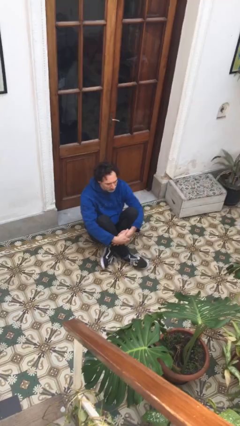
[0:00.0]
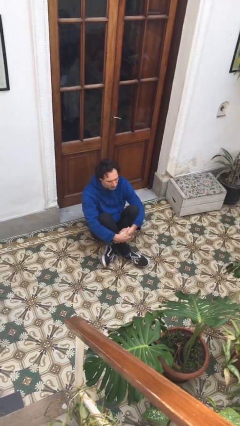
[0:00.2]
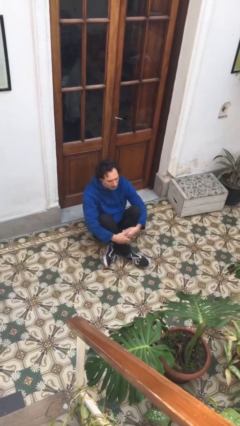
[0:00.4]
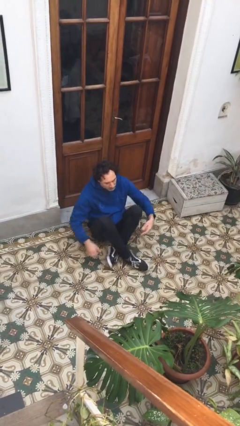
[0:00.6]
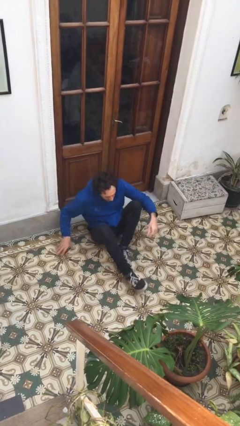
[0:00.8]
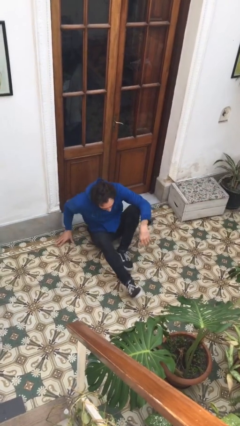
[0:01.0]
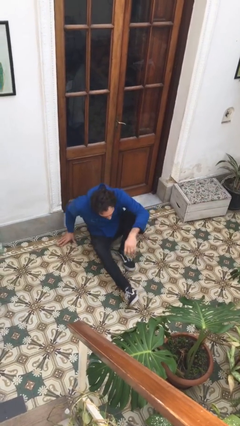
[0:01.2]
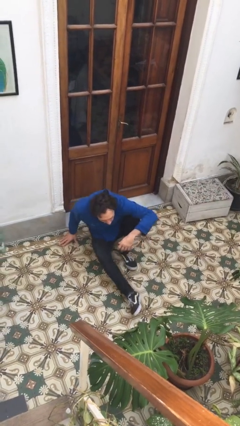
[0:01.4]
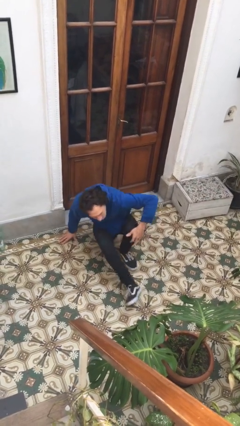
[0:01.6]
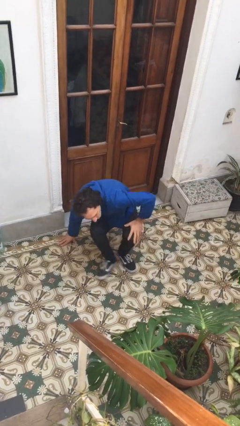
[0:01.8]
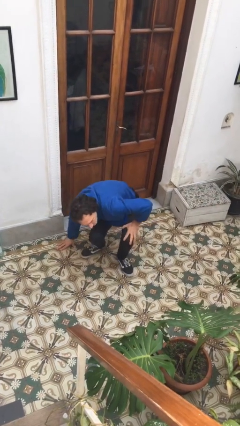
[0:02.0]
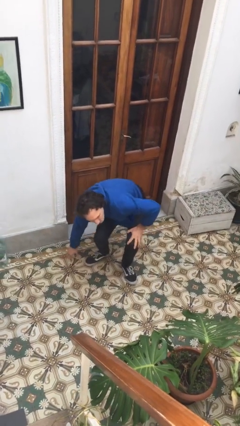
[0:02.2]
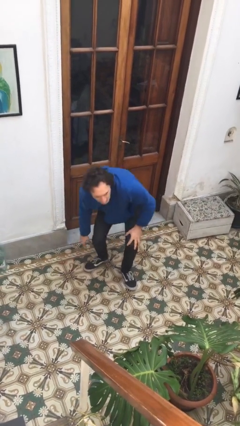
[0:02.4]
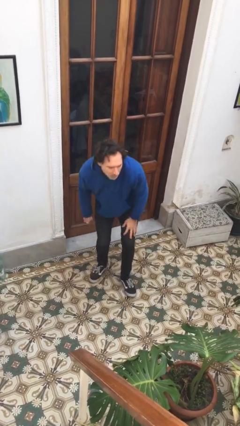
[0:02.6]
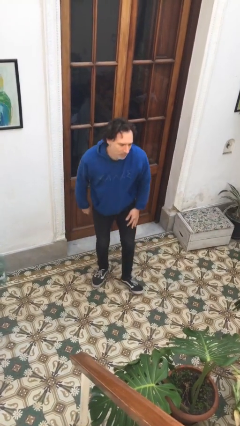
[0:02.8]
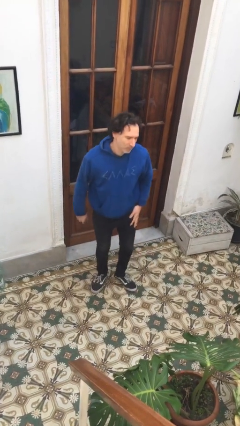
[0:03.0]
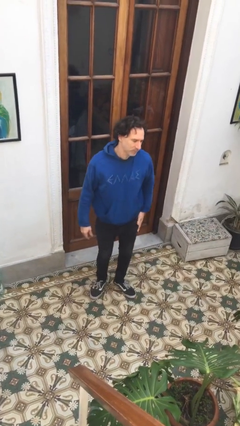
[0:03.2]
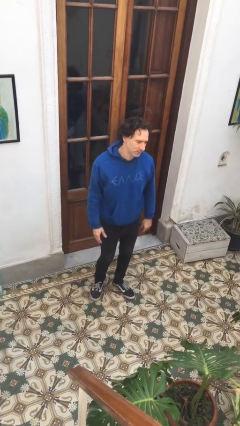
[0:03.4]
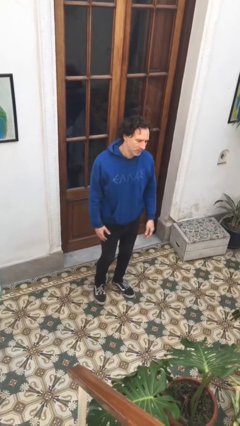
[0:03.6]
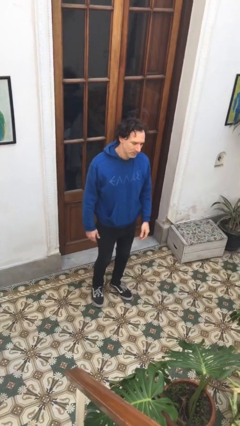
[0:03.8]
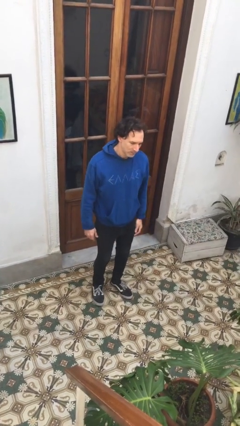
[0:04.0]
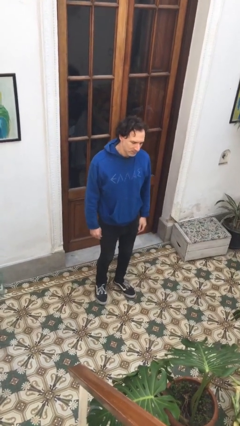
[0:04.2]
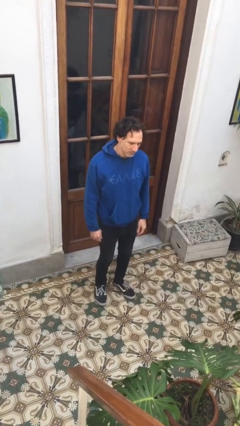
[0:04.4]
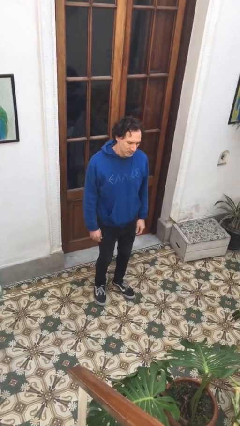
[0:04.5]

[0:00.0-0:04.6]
person stands up from floor

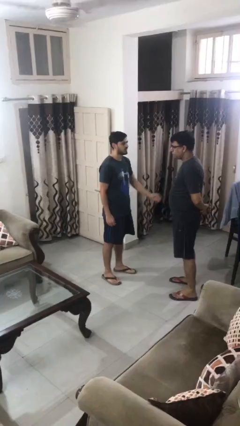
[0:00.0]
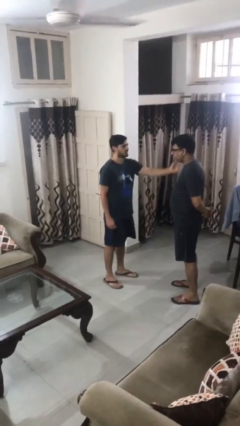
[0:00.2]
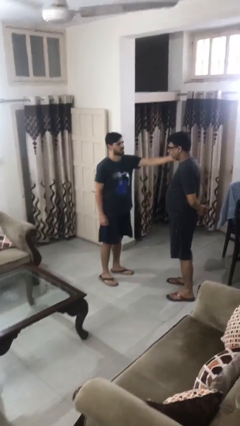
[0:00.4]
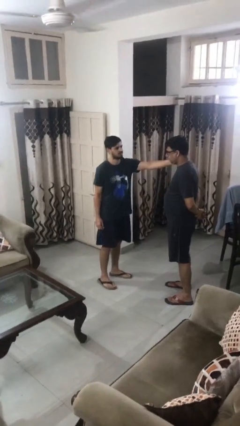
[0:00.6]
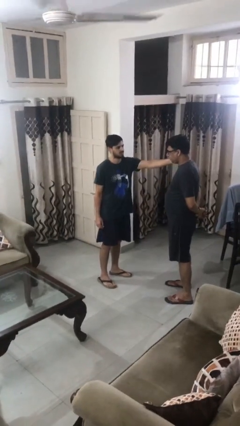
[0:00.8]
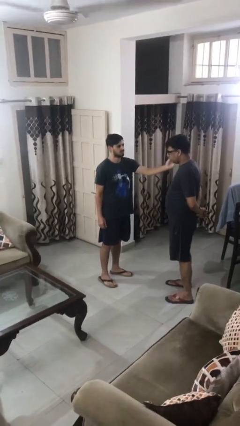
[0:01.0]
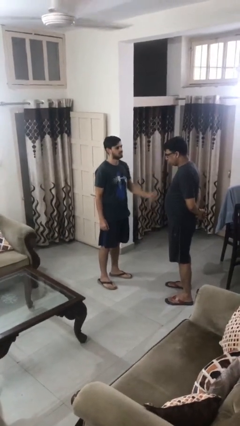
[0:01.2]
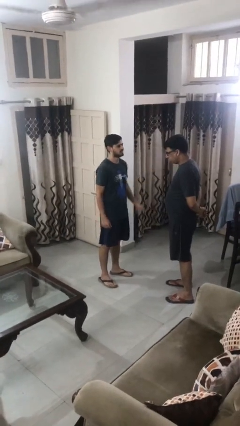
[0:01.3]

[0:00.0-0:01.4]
person touches face of person

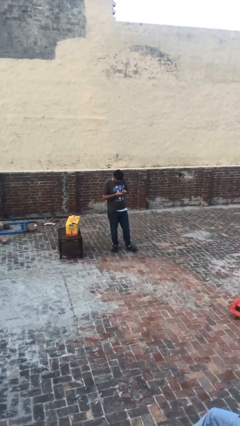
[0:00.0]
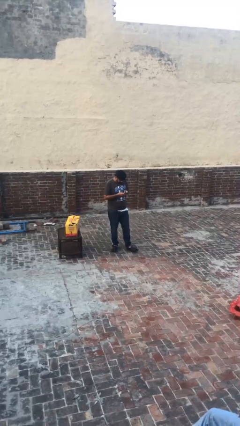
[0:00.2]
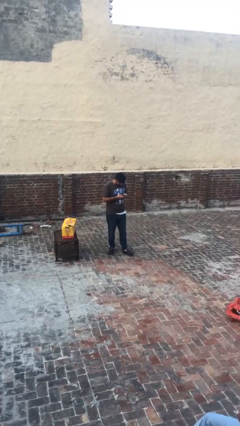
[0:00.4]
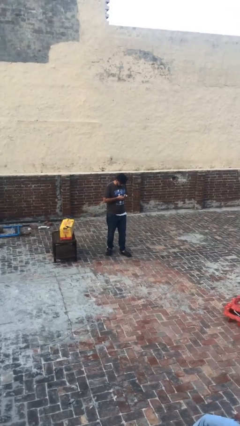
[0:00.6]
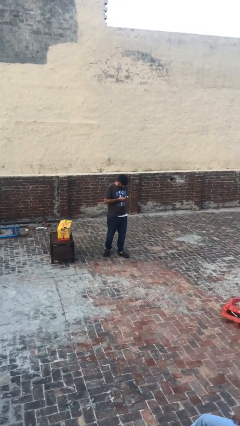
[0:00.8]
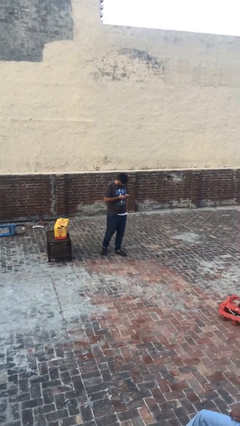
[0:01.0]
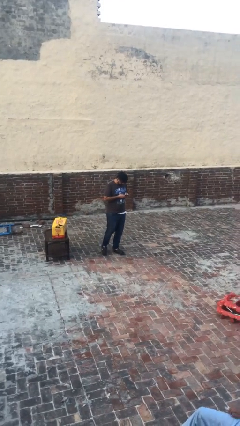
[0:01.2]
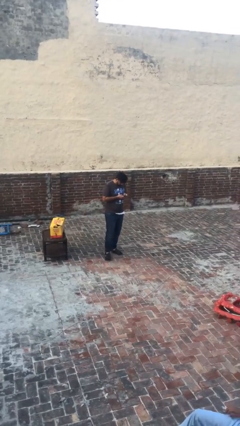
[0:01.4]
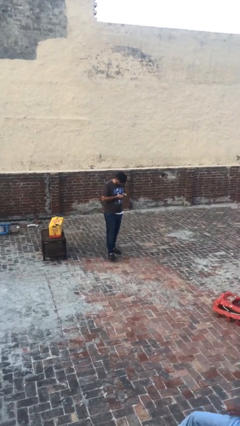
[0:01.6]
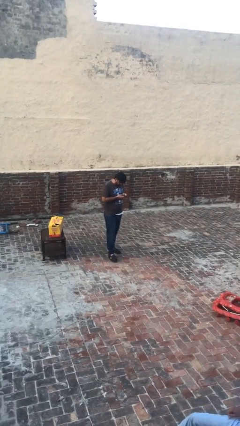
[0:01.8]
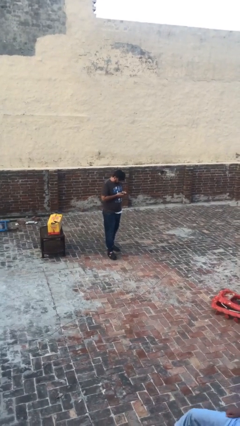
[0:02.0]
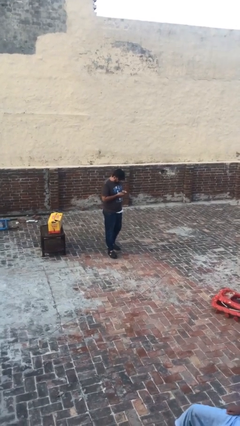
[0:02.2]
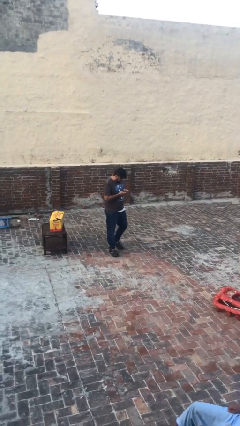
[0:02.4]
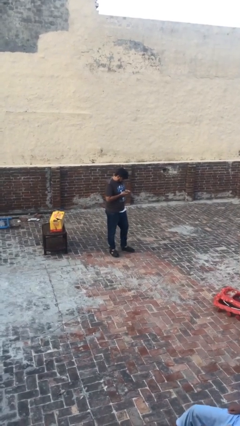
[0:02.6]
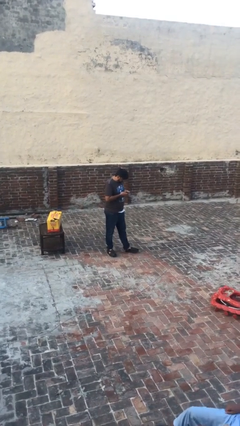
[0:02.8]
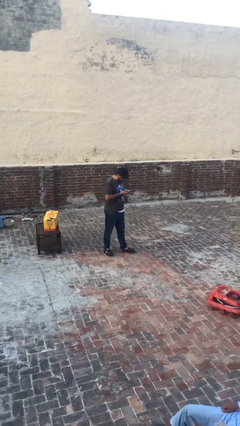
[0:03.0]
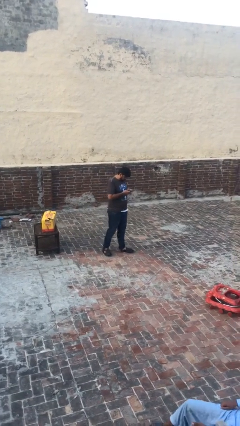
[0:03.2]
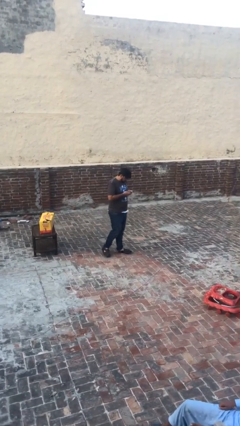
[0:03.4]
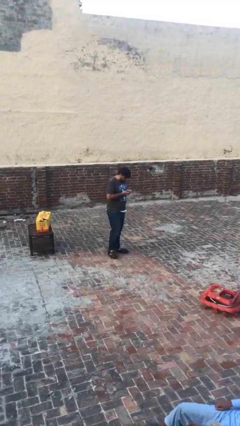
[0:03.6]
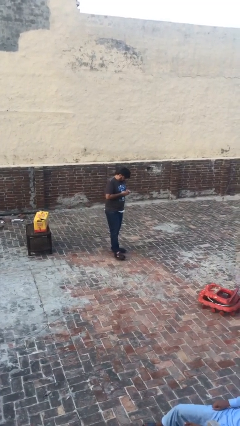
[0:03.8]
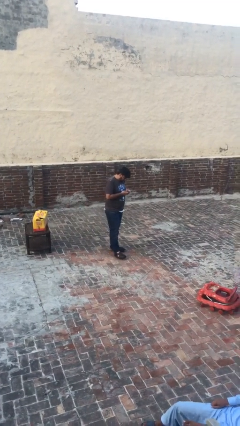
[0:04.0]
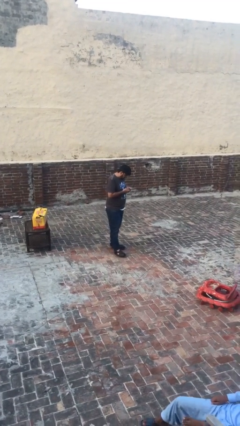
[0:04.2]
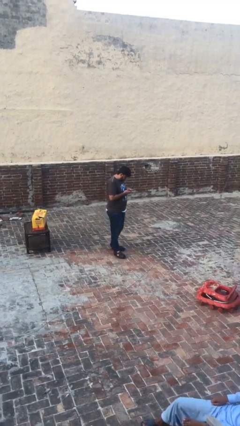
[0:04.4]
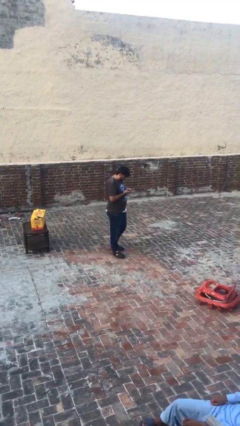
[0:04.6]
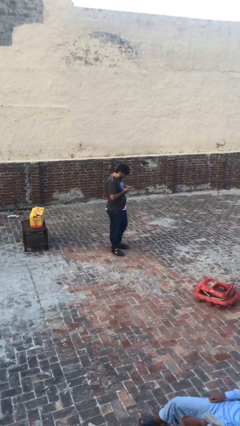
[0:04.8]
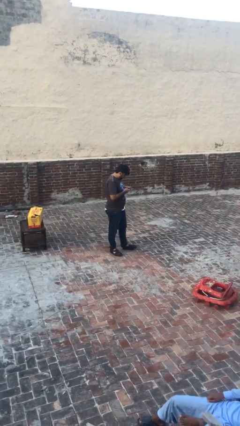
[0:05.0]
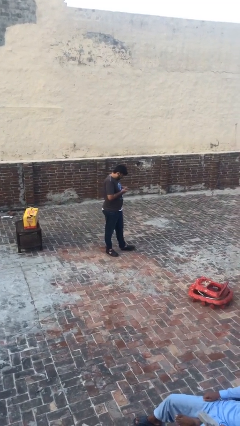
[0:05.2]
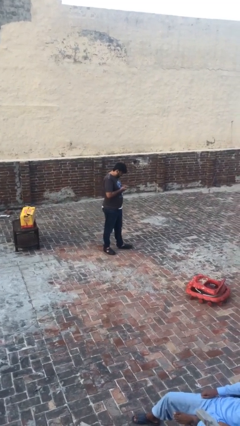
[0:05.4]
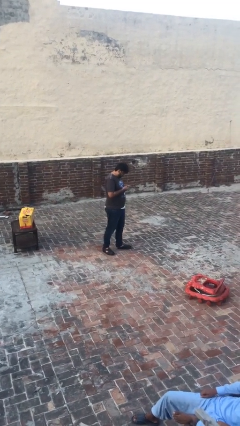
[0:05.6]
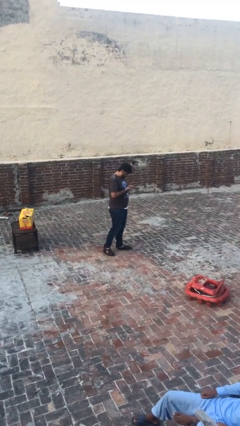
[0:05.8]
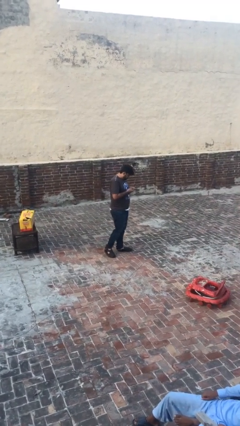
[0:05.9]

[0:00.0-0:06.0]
person texts on phone

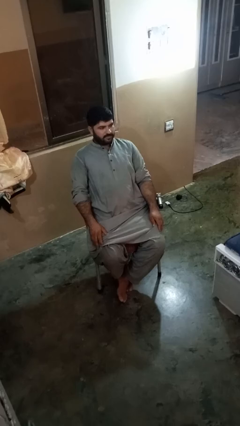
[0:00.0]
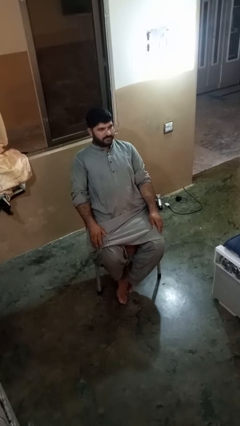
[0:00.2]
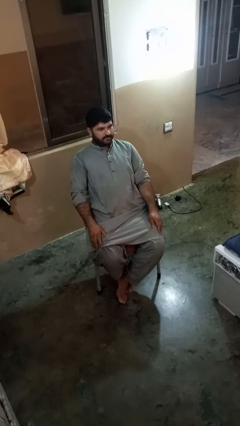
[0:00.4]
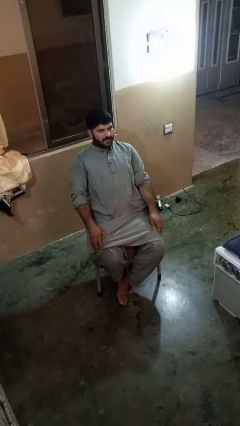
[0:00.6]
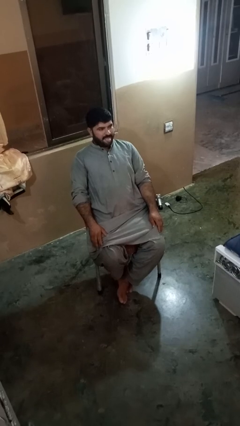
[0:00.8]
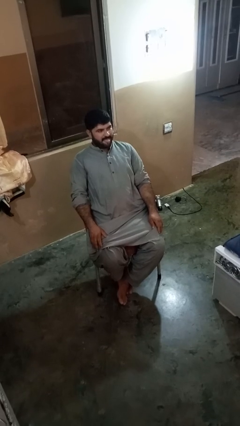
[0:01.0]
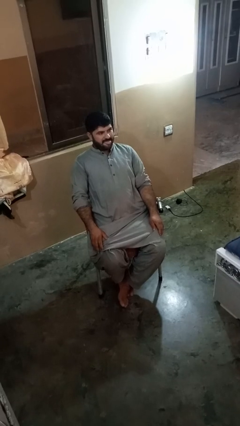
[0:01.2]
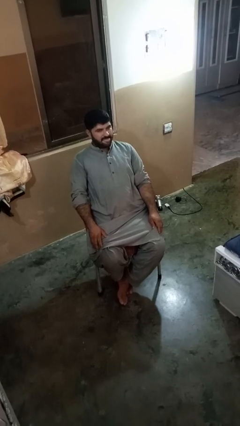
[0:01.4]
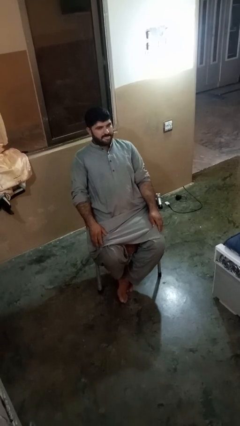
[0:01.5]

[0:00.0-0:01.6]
person sticks out tongue

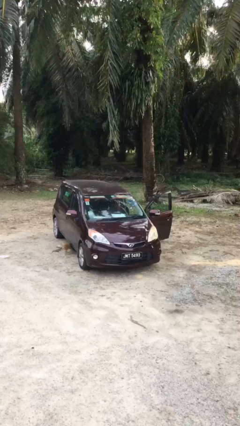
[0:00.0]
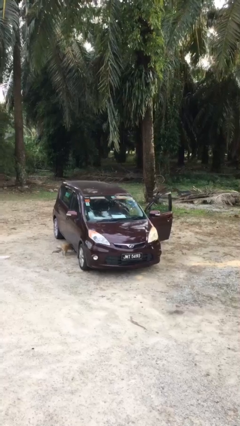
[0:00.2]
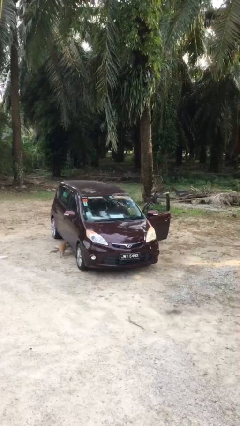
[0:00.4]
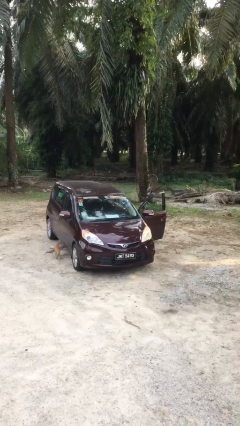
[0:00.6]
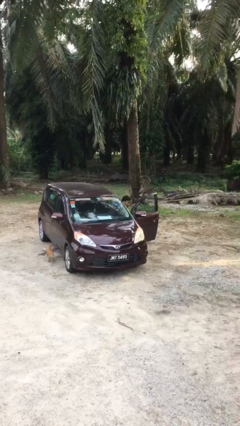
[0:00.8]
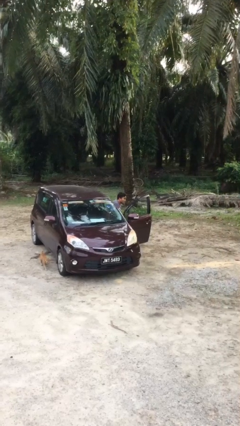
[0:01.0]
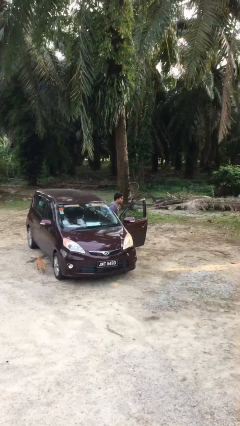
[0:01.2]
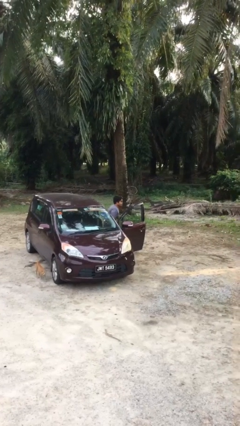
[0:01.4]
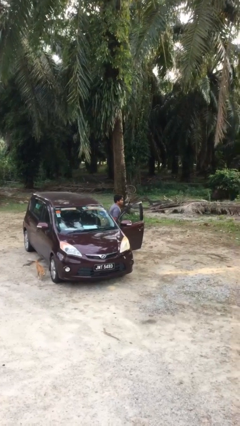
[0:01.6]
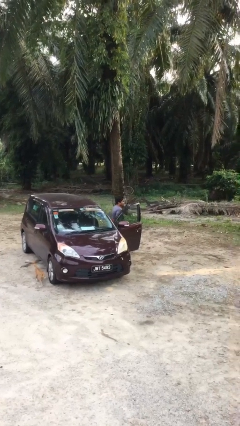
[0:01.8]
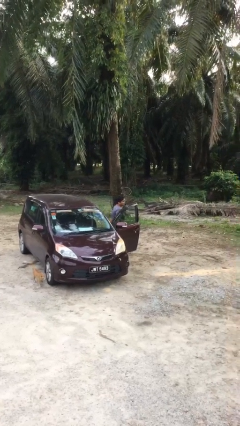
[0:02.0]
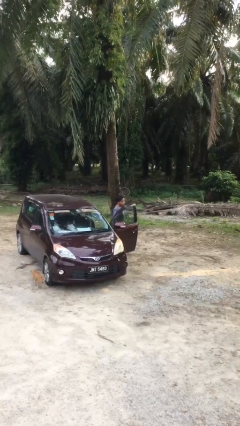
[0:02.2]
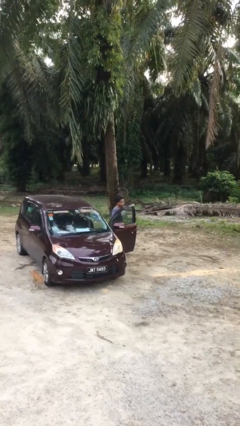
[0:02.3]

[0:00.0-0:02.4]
person exits car

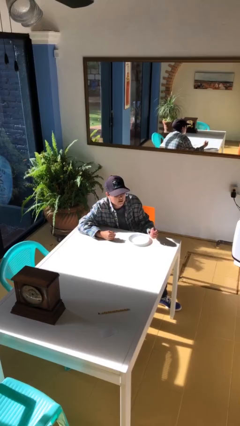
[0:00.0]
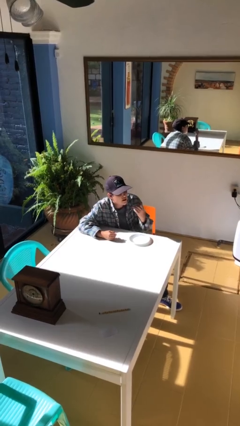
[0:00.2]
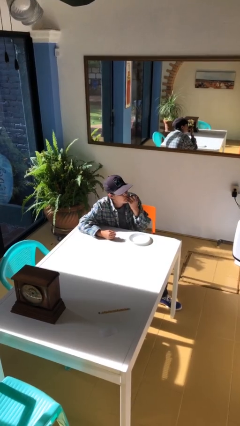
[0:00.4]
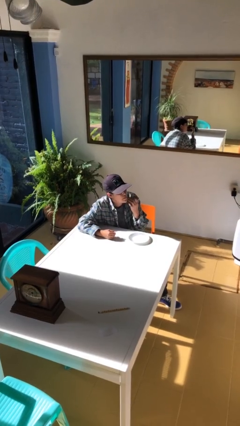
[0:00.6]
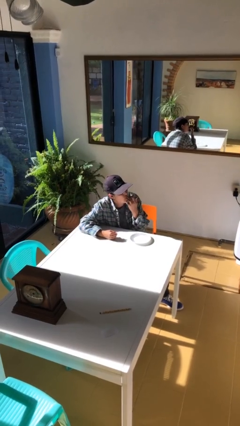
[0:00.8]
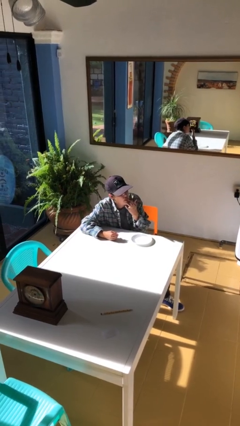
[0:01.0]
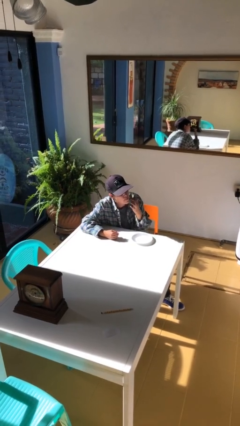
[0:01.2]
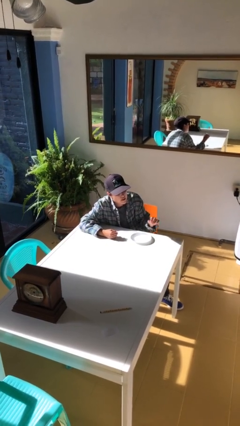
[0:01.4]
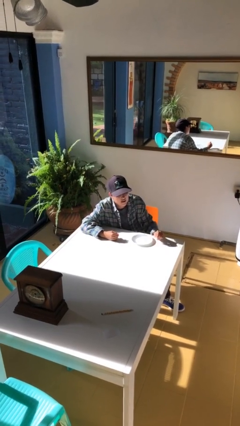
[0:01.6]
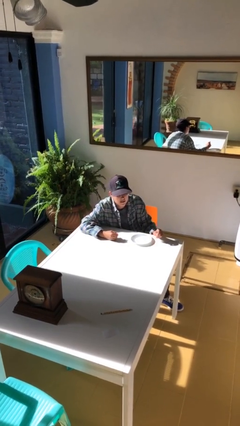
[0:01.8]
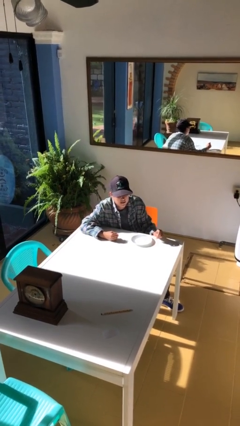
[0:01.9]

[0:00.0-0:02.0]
person licks fingers
